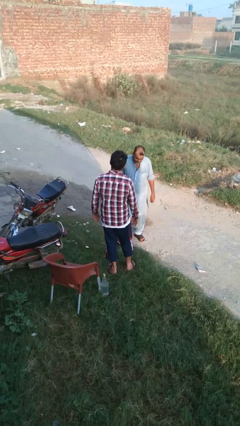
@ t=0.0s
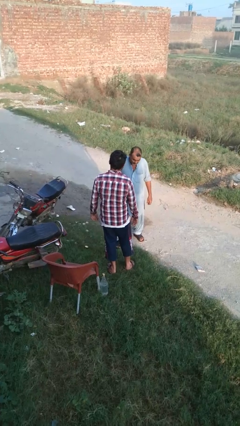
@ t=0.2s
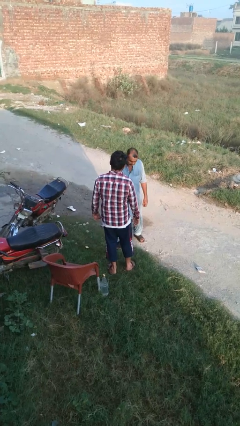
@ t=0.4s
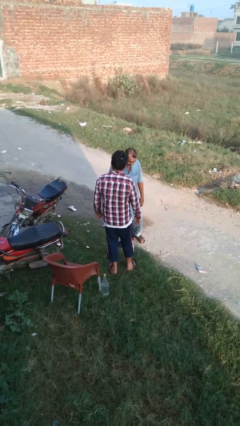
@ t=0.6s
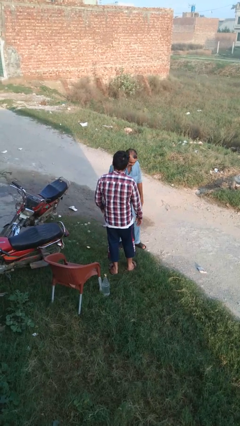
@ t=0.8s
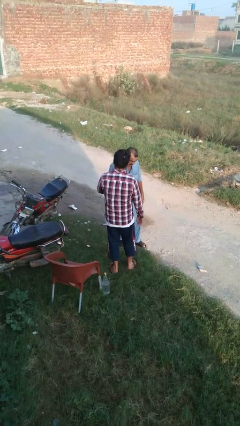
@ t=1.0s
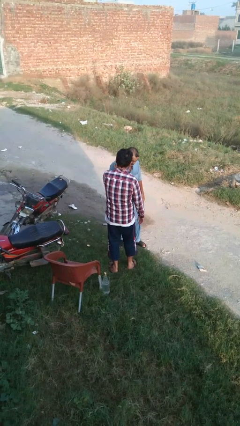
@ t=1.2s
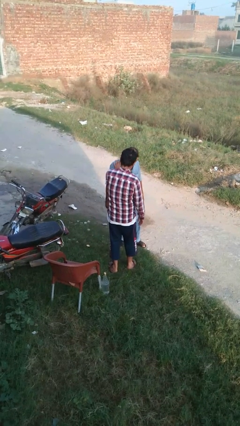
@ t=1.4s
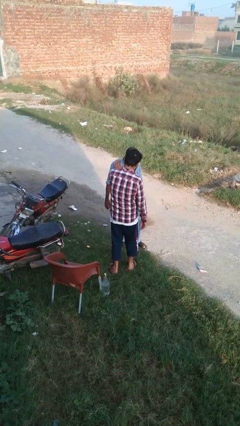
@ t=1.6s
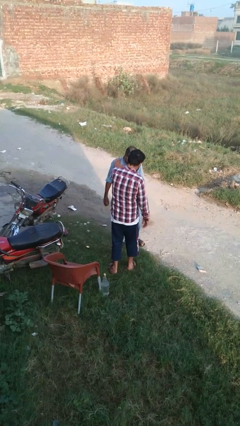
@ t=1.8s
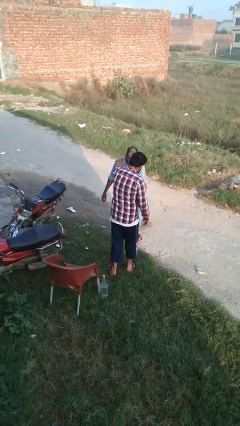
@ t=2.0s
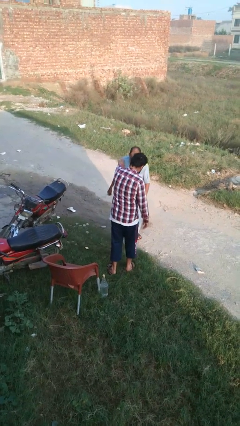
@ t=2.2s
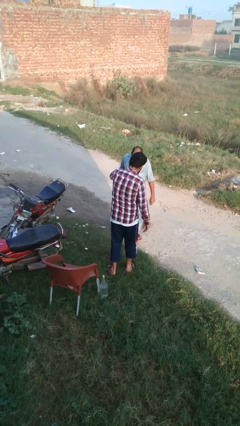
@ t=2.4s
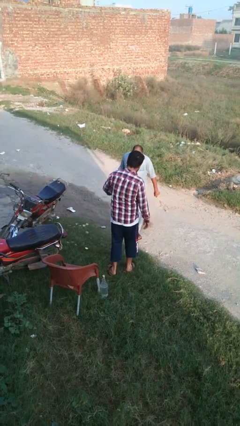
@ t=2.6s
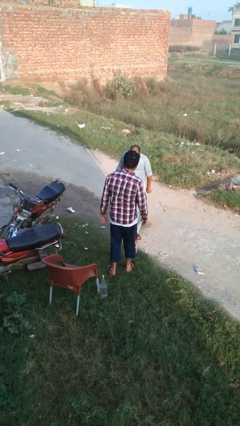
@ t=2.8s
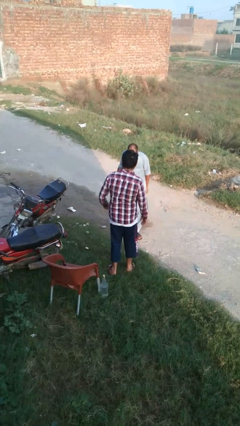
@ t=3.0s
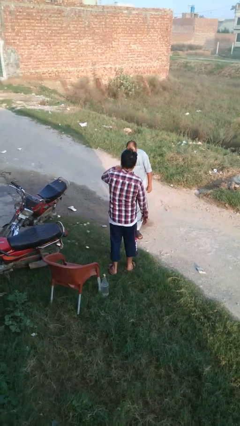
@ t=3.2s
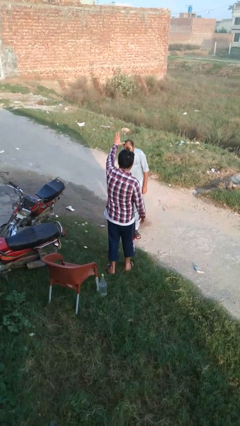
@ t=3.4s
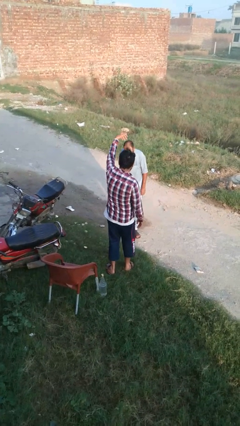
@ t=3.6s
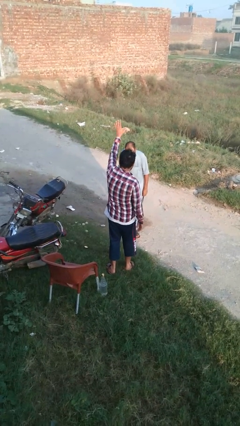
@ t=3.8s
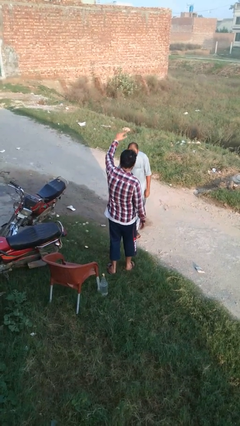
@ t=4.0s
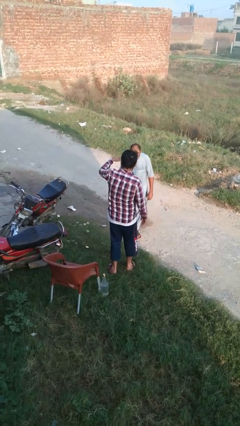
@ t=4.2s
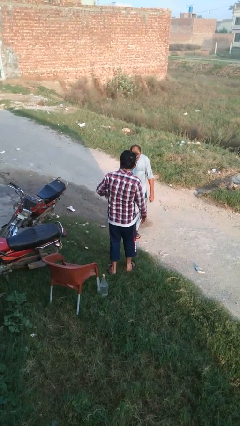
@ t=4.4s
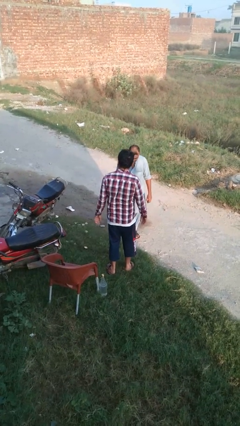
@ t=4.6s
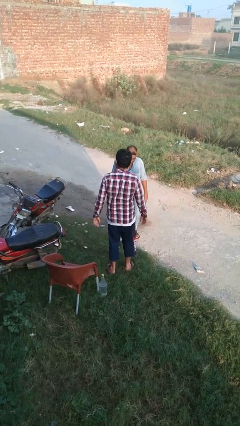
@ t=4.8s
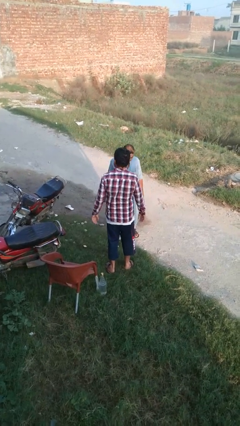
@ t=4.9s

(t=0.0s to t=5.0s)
person shoves person

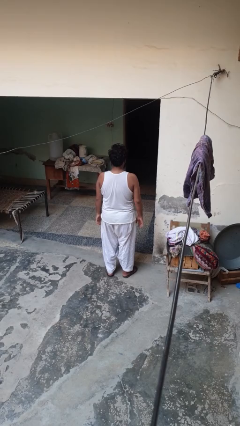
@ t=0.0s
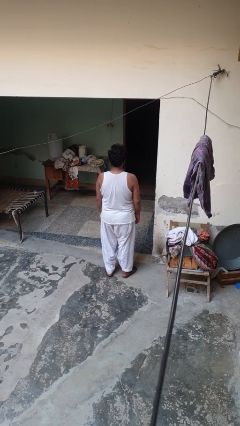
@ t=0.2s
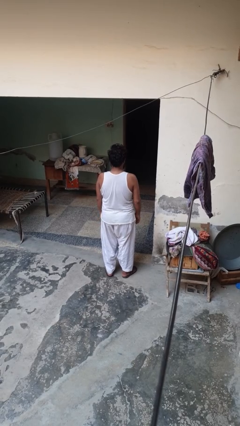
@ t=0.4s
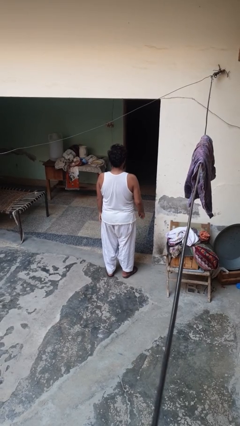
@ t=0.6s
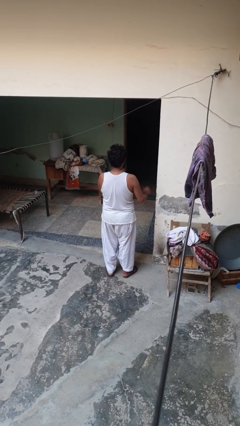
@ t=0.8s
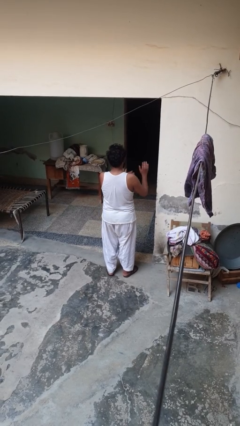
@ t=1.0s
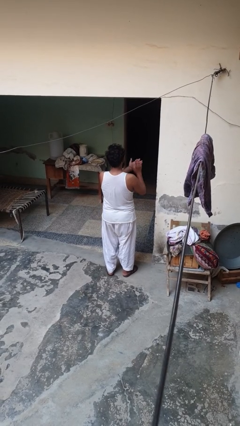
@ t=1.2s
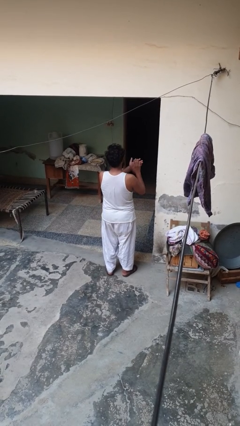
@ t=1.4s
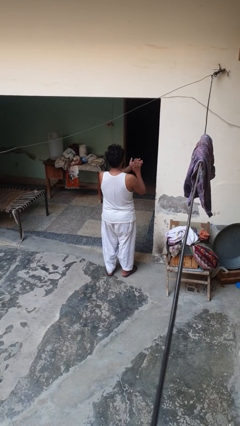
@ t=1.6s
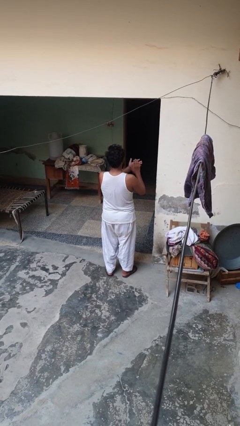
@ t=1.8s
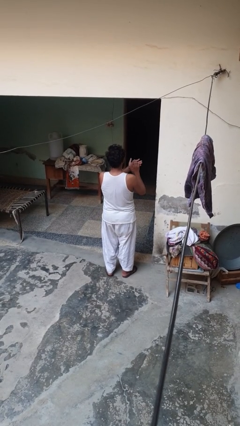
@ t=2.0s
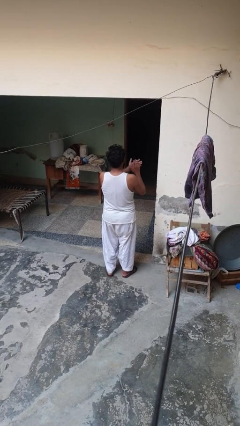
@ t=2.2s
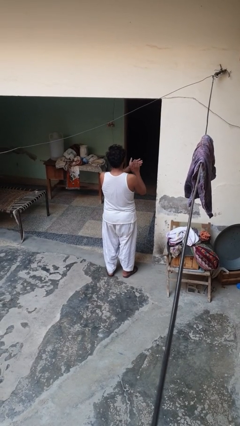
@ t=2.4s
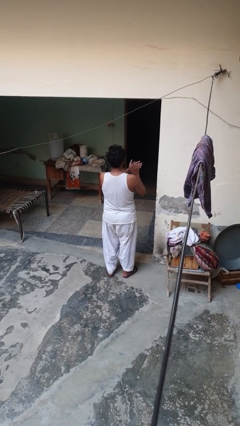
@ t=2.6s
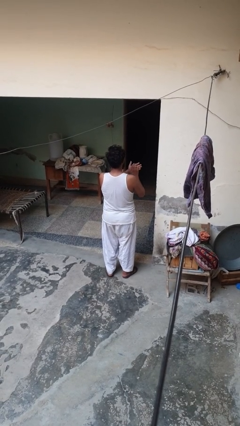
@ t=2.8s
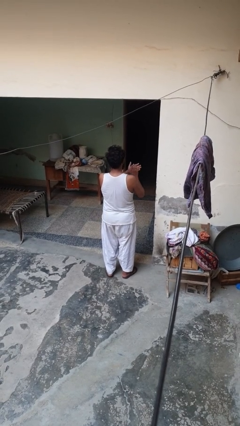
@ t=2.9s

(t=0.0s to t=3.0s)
person claps hands

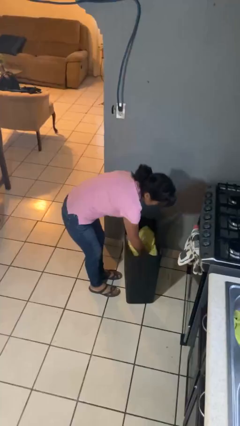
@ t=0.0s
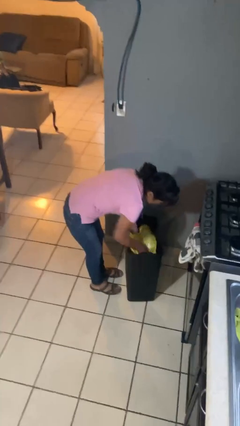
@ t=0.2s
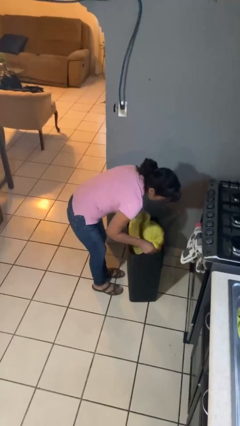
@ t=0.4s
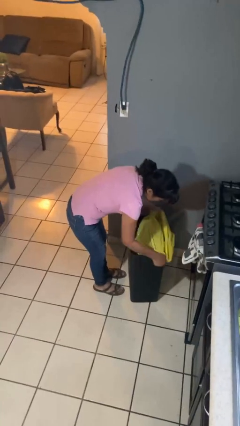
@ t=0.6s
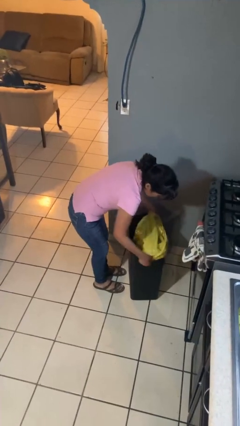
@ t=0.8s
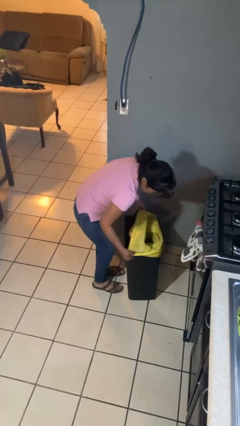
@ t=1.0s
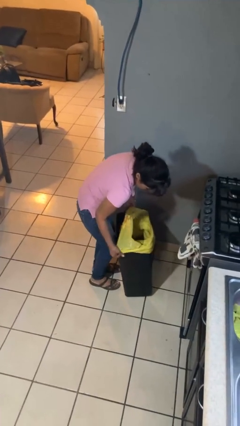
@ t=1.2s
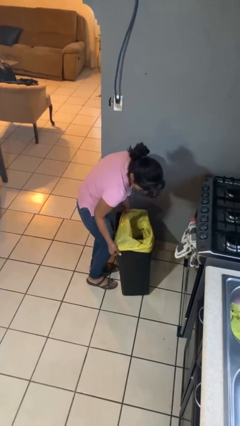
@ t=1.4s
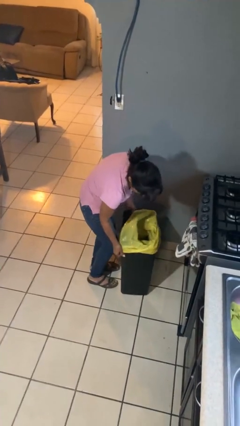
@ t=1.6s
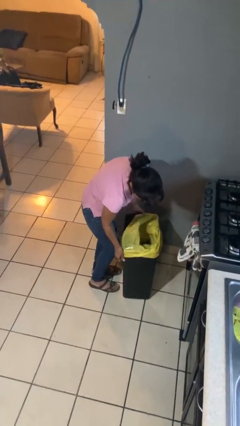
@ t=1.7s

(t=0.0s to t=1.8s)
person inserts trashbag into trashcan

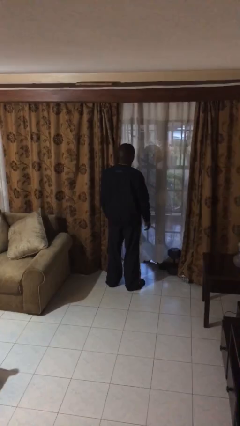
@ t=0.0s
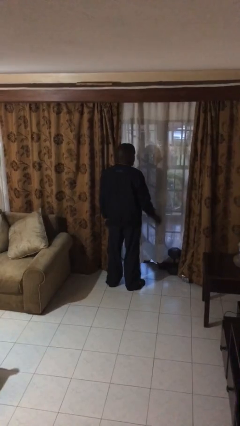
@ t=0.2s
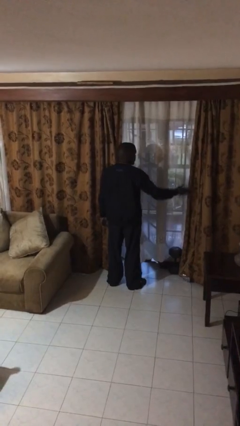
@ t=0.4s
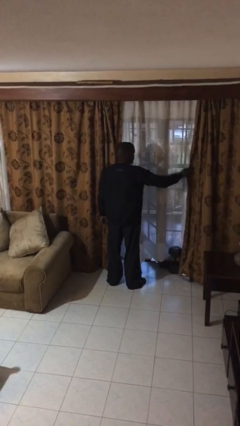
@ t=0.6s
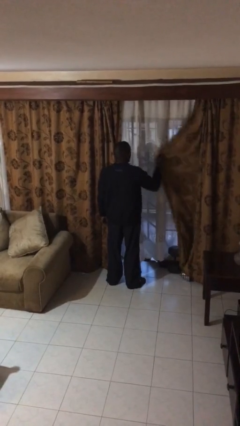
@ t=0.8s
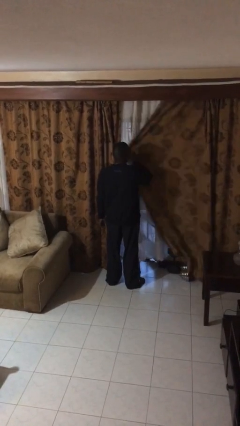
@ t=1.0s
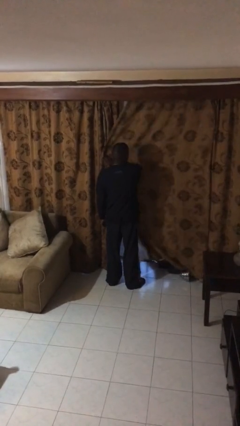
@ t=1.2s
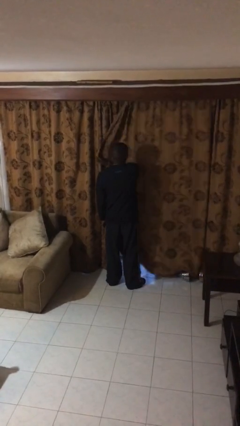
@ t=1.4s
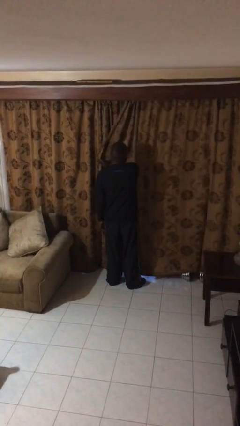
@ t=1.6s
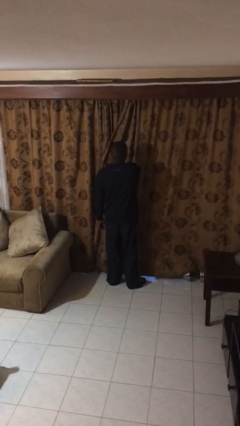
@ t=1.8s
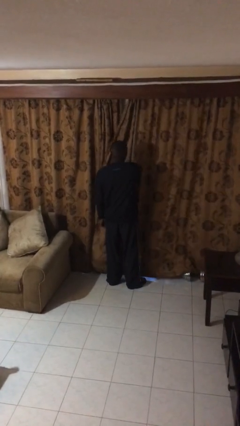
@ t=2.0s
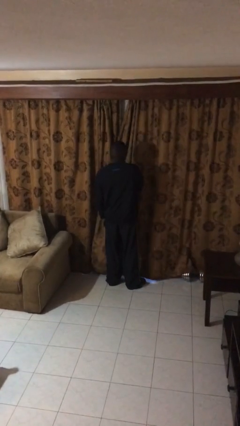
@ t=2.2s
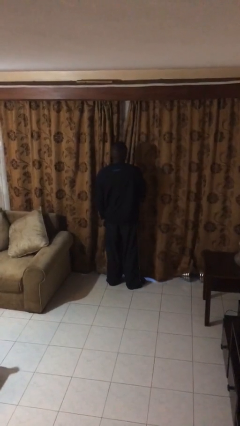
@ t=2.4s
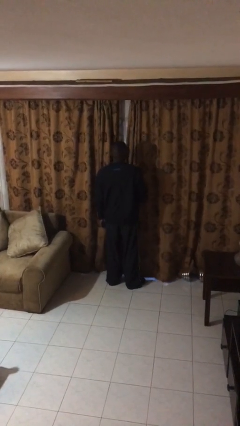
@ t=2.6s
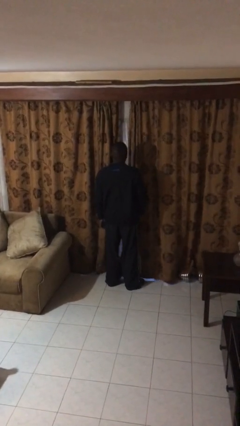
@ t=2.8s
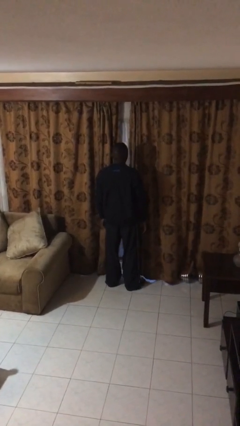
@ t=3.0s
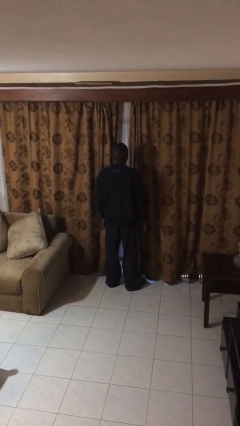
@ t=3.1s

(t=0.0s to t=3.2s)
person closes curtains

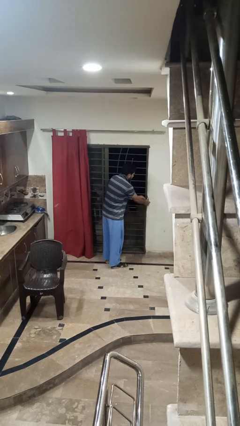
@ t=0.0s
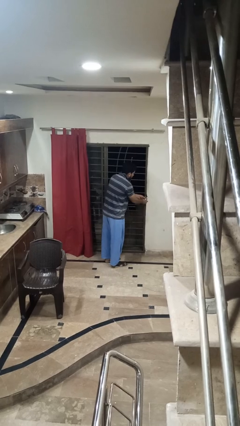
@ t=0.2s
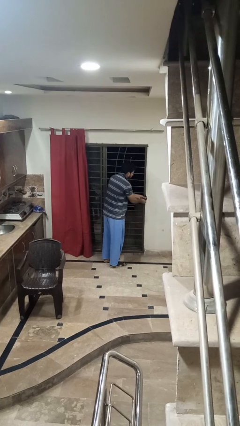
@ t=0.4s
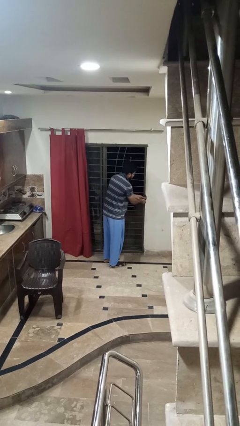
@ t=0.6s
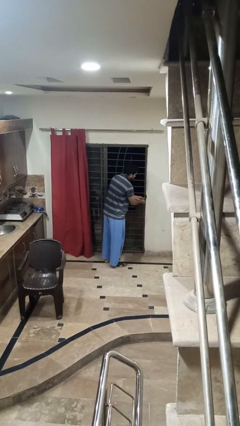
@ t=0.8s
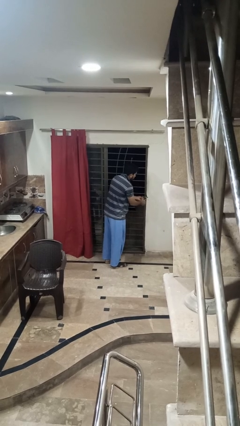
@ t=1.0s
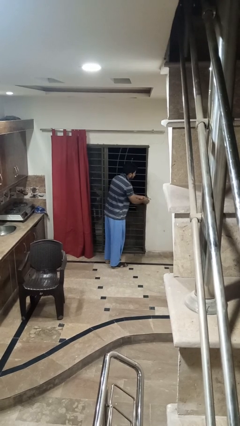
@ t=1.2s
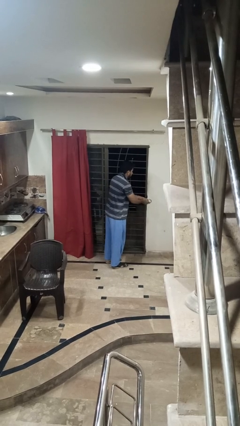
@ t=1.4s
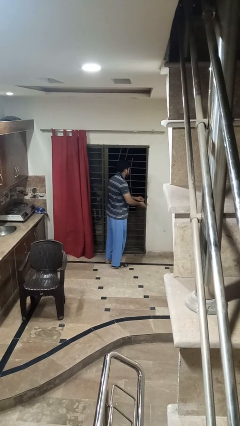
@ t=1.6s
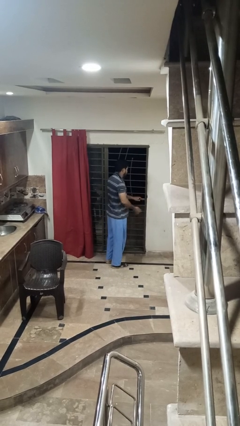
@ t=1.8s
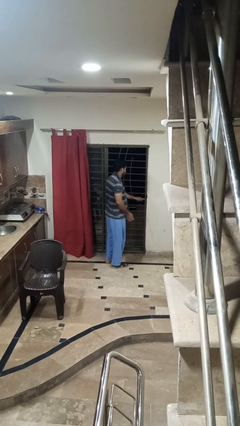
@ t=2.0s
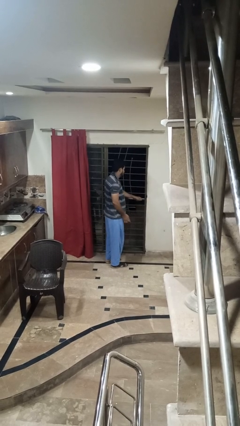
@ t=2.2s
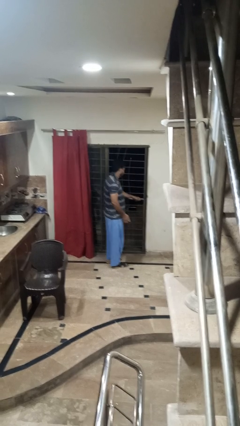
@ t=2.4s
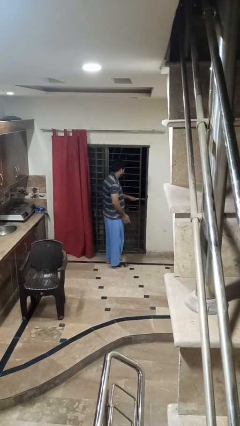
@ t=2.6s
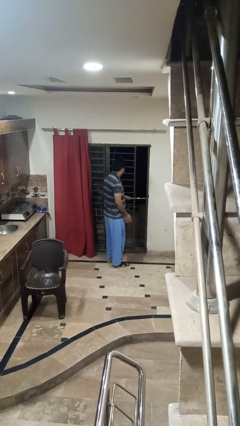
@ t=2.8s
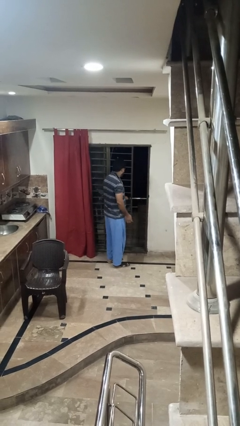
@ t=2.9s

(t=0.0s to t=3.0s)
person unlocks door with keys

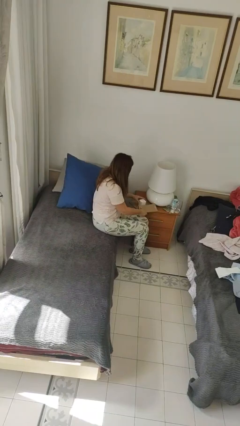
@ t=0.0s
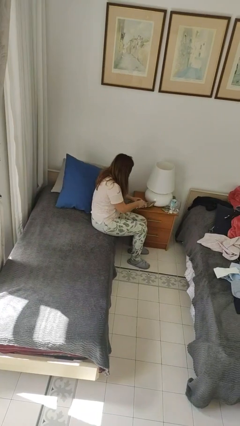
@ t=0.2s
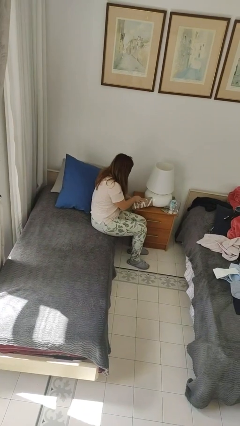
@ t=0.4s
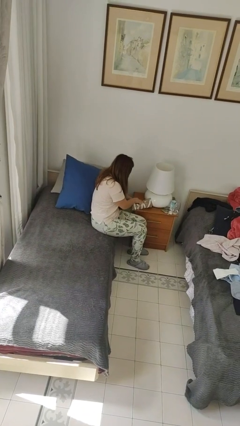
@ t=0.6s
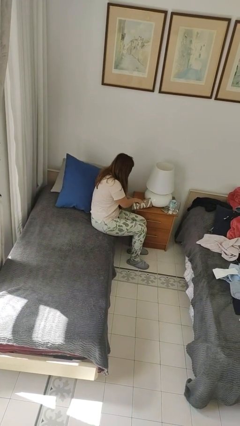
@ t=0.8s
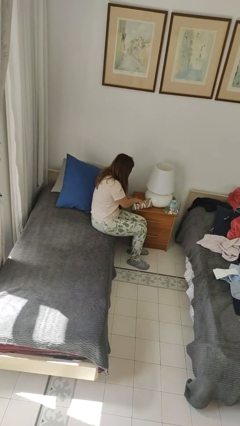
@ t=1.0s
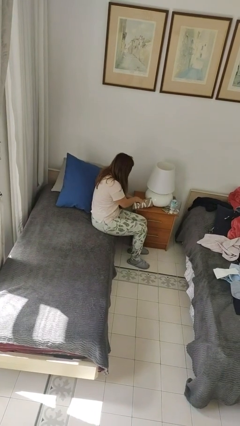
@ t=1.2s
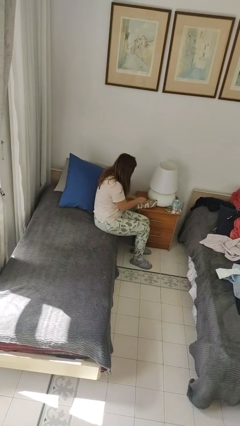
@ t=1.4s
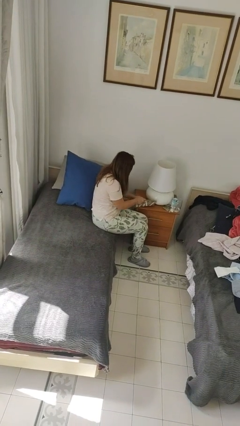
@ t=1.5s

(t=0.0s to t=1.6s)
person wraps box
